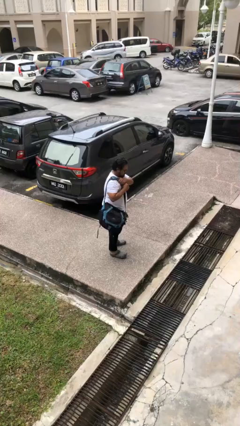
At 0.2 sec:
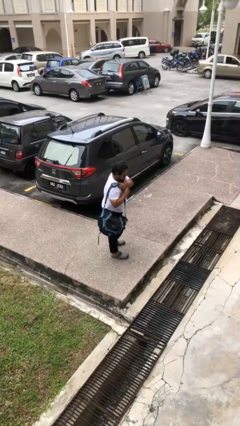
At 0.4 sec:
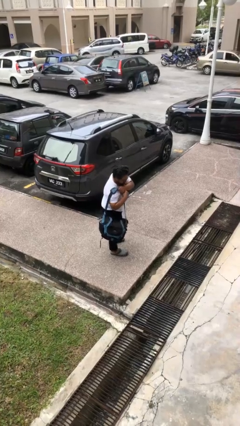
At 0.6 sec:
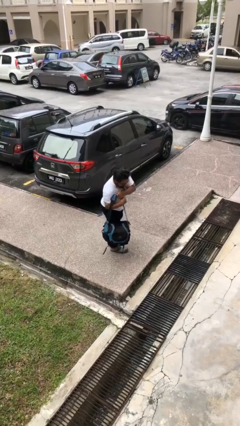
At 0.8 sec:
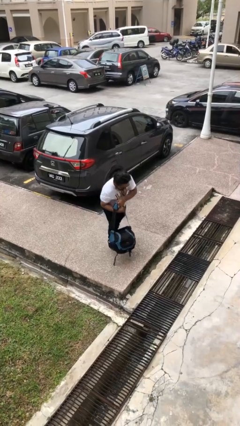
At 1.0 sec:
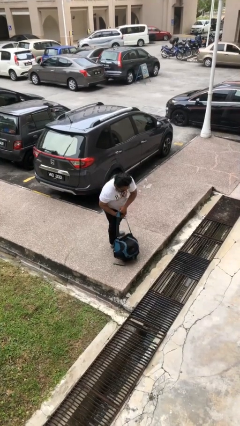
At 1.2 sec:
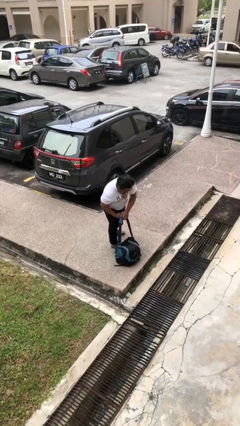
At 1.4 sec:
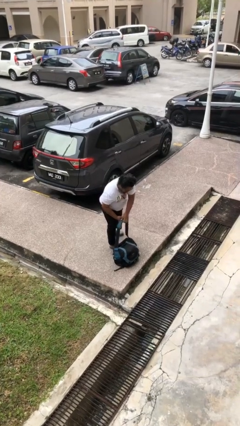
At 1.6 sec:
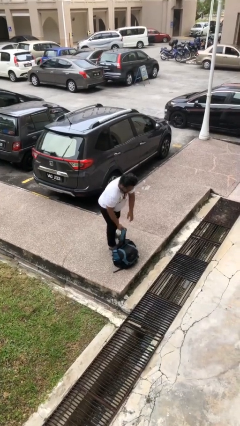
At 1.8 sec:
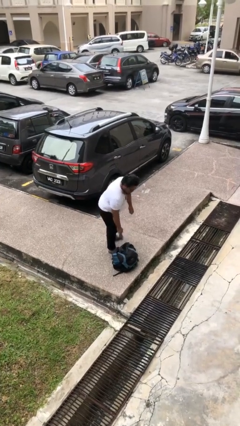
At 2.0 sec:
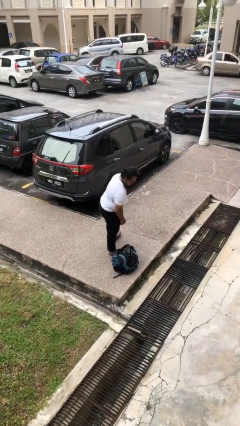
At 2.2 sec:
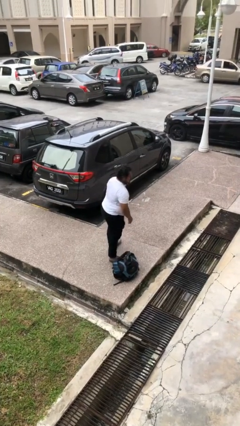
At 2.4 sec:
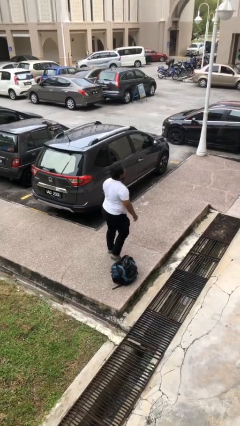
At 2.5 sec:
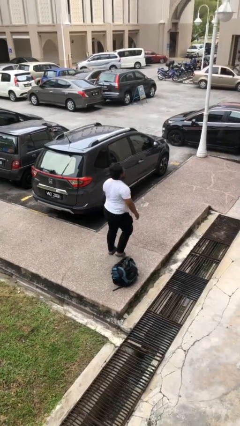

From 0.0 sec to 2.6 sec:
person puts down object on floor

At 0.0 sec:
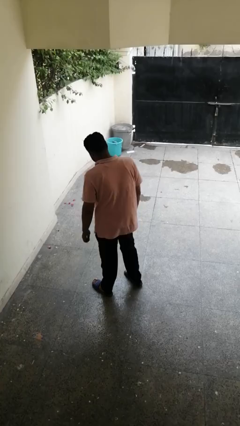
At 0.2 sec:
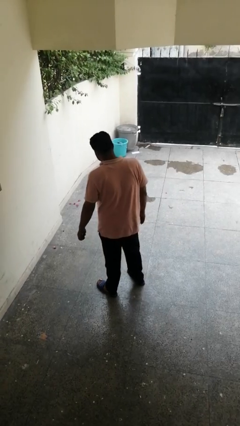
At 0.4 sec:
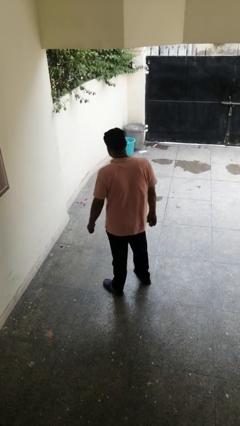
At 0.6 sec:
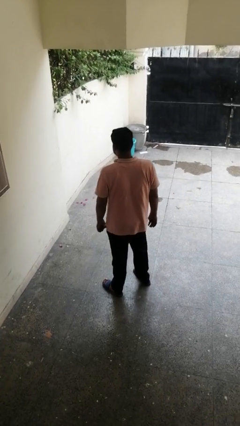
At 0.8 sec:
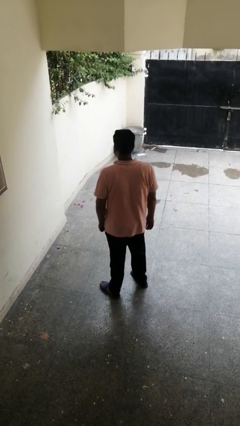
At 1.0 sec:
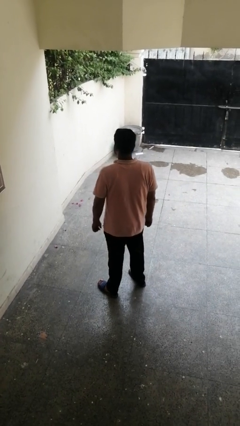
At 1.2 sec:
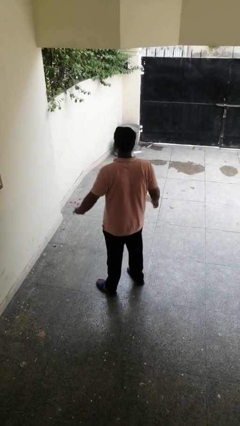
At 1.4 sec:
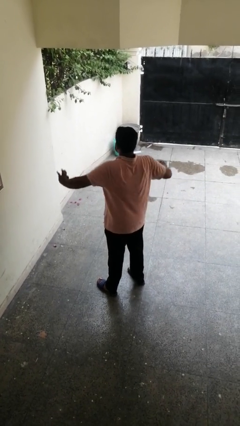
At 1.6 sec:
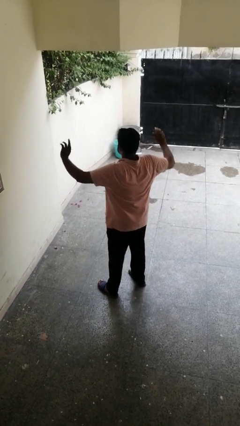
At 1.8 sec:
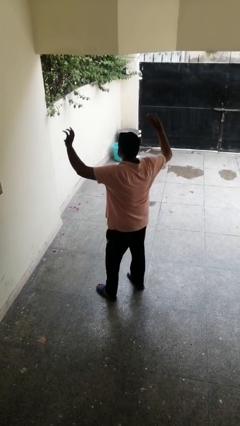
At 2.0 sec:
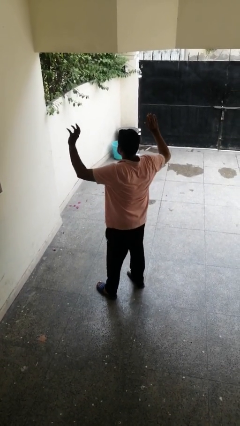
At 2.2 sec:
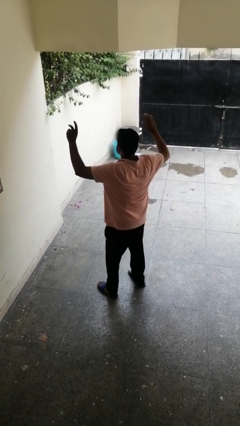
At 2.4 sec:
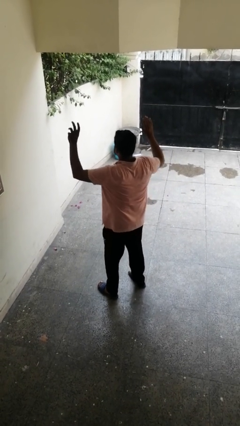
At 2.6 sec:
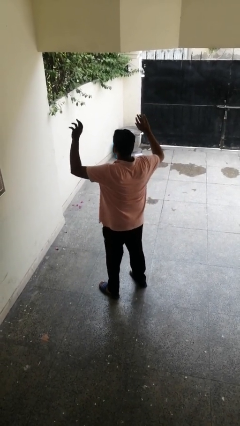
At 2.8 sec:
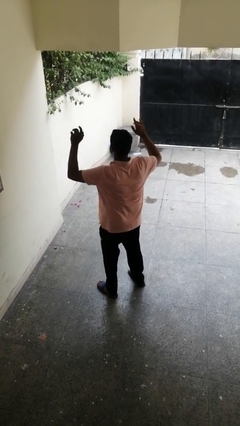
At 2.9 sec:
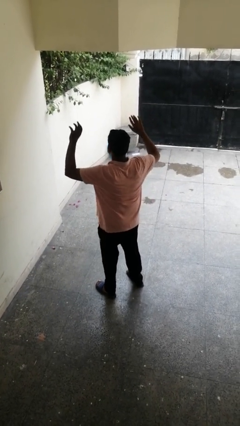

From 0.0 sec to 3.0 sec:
person dances in place

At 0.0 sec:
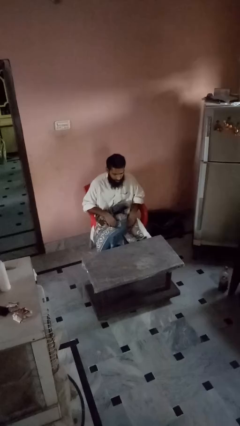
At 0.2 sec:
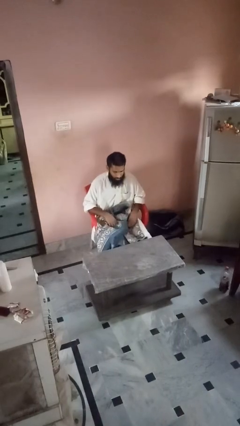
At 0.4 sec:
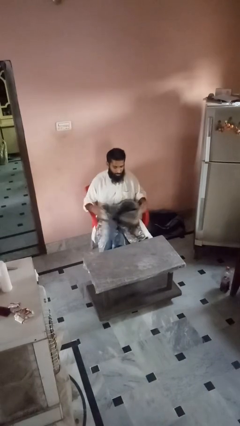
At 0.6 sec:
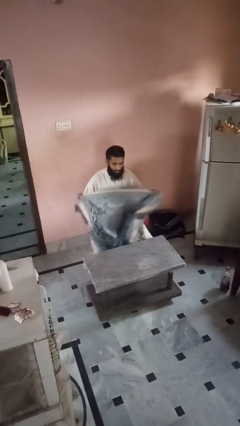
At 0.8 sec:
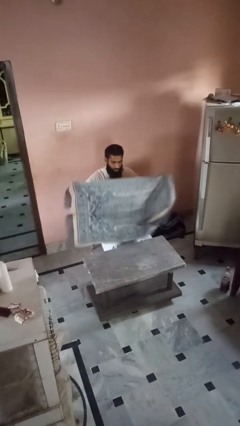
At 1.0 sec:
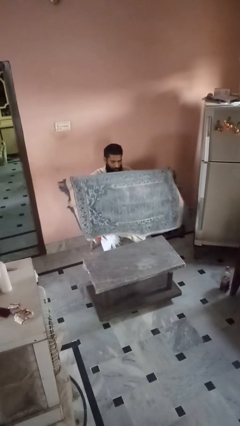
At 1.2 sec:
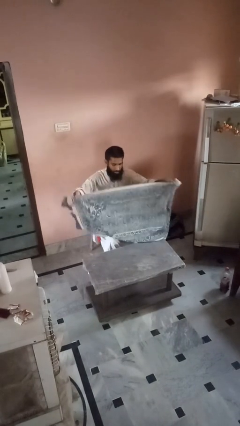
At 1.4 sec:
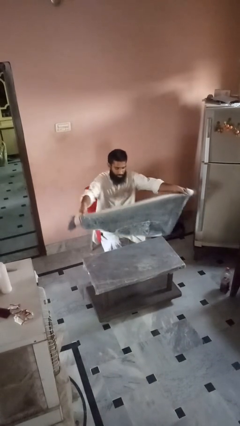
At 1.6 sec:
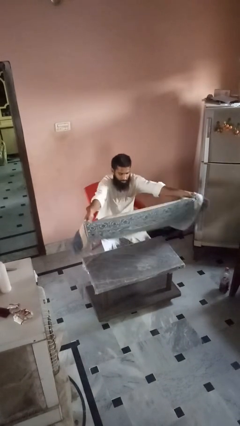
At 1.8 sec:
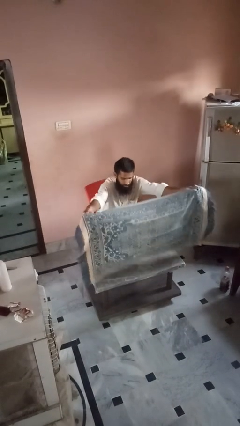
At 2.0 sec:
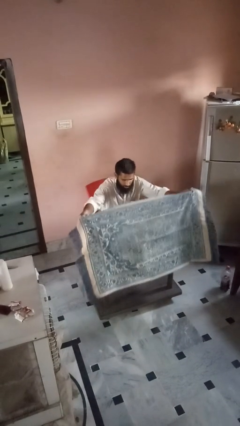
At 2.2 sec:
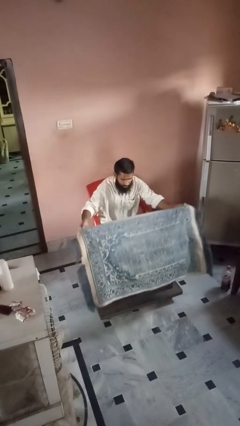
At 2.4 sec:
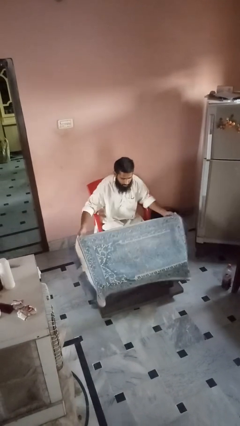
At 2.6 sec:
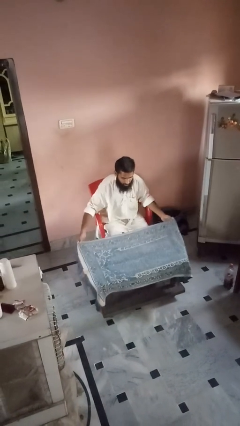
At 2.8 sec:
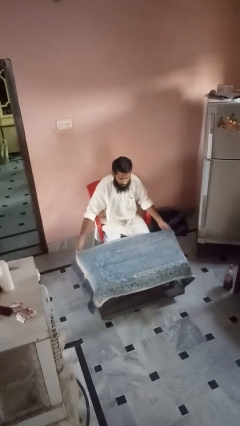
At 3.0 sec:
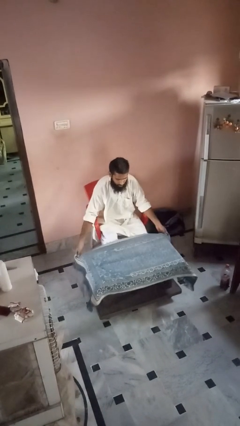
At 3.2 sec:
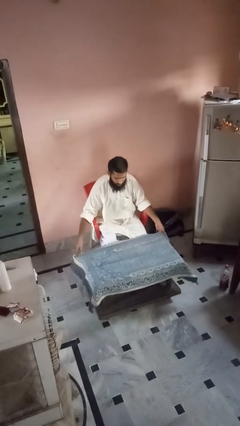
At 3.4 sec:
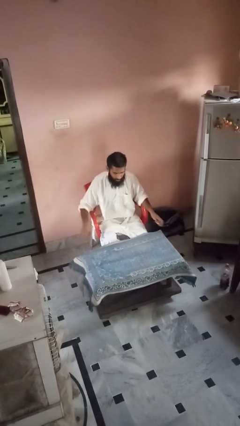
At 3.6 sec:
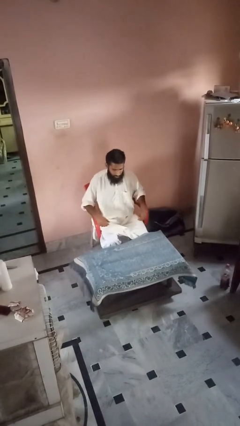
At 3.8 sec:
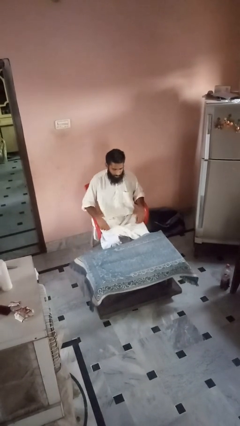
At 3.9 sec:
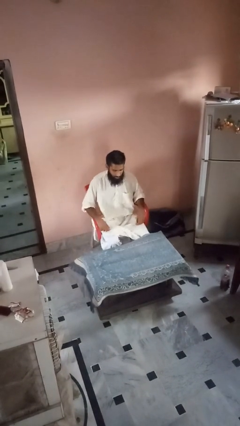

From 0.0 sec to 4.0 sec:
person spreads tablecloth

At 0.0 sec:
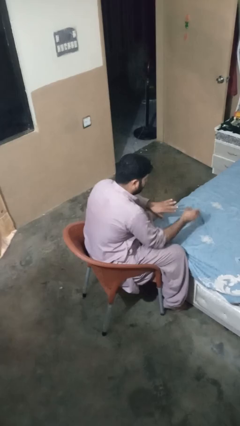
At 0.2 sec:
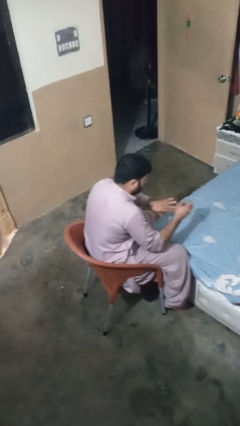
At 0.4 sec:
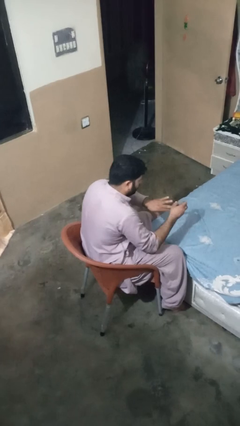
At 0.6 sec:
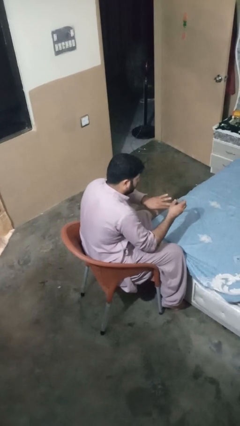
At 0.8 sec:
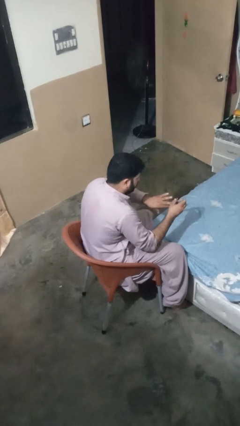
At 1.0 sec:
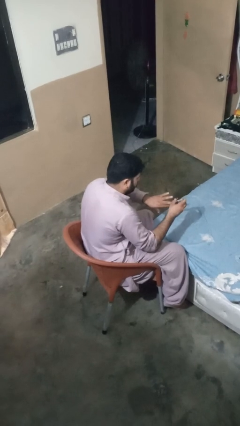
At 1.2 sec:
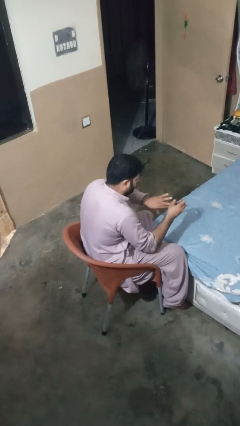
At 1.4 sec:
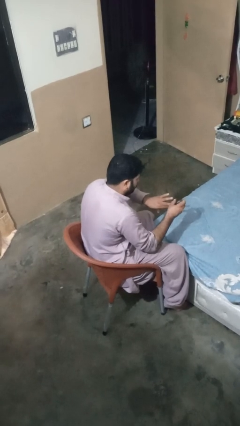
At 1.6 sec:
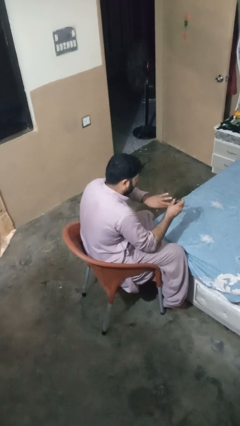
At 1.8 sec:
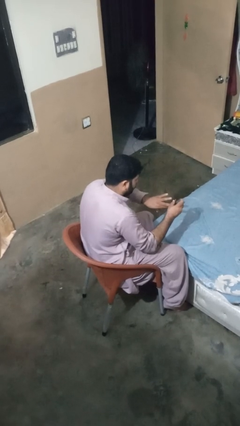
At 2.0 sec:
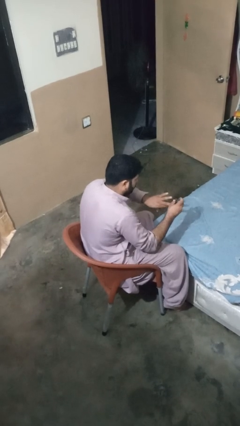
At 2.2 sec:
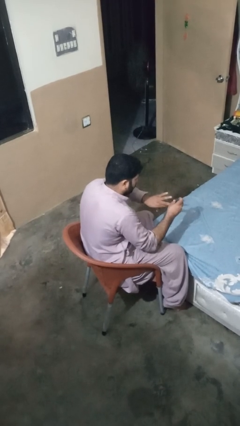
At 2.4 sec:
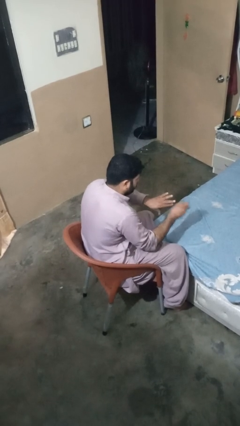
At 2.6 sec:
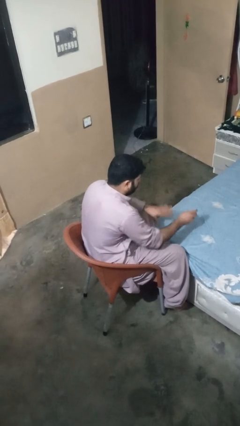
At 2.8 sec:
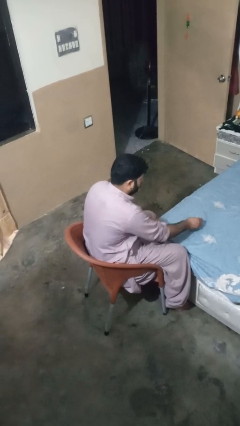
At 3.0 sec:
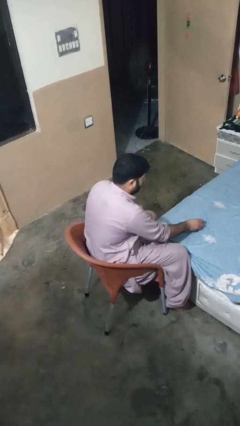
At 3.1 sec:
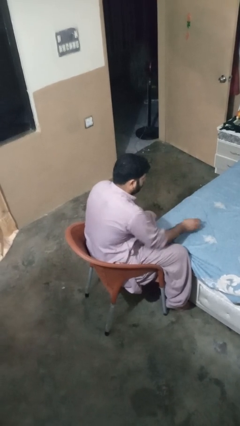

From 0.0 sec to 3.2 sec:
person clips fingernails

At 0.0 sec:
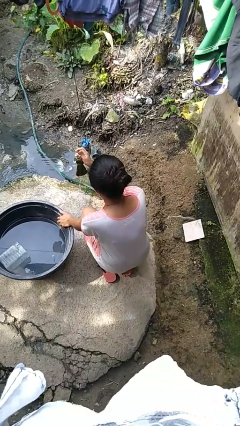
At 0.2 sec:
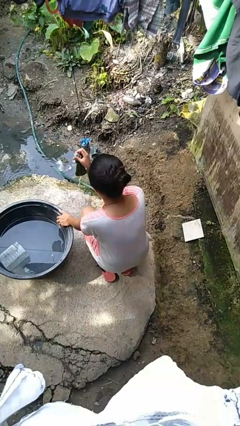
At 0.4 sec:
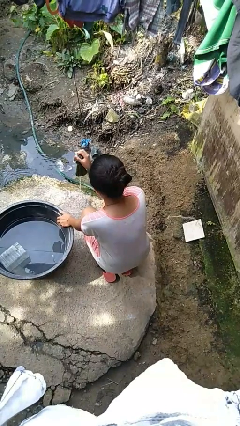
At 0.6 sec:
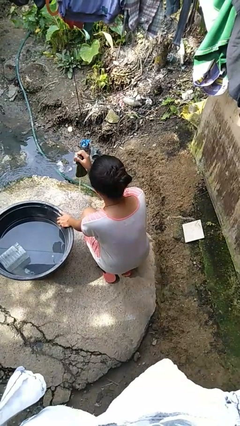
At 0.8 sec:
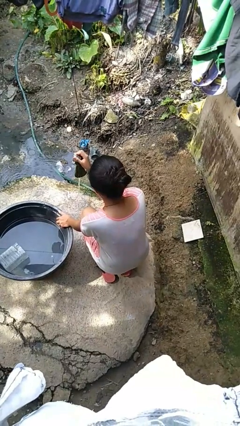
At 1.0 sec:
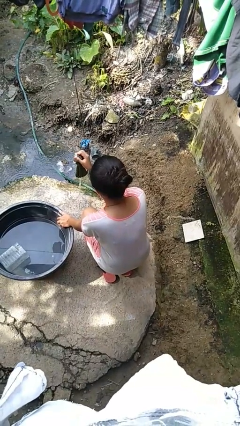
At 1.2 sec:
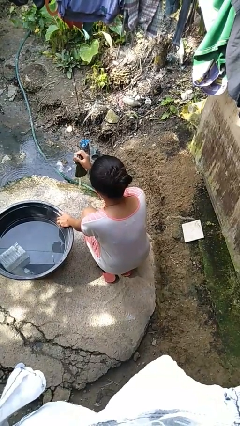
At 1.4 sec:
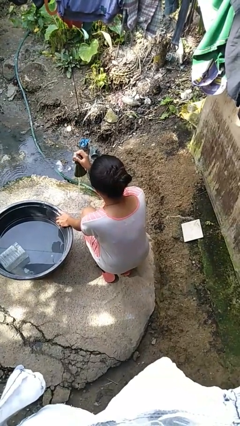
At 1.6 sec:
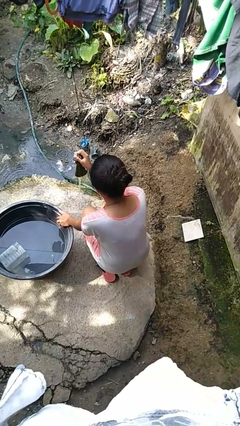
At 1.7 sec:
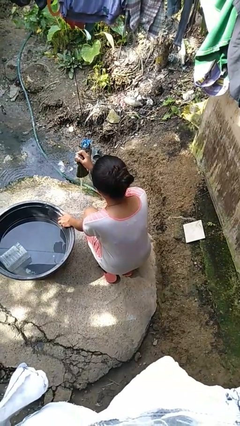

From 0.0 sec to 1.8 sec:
person turns on faucet

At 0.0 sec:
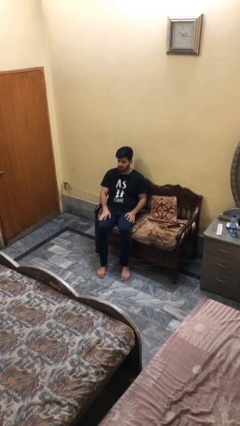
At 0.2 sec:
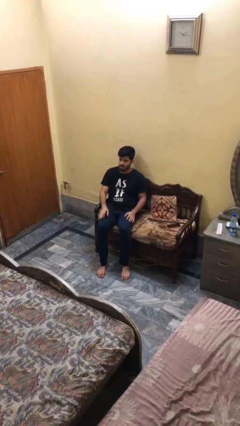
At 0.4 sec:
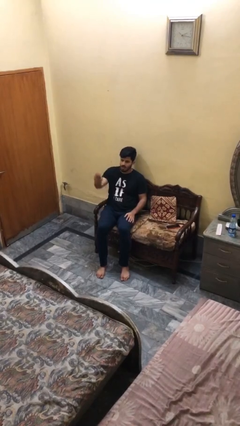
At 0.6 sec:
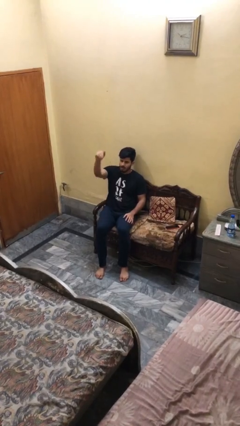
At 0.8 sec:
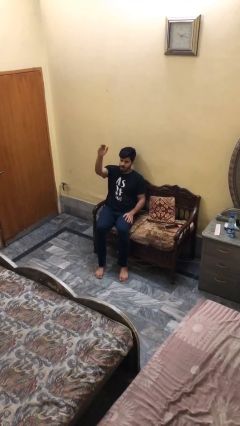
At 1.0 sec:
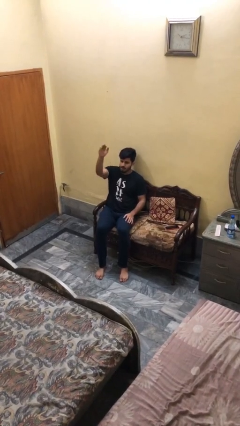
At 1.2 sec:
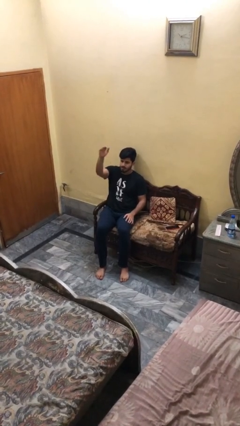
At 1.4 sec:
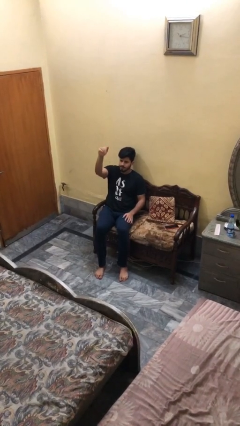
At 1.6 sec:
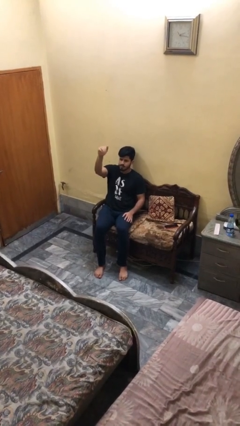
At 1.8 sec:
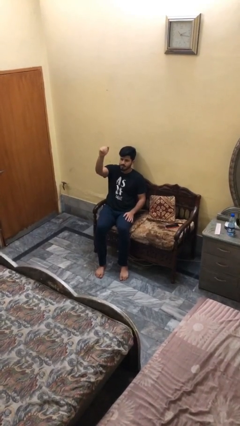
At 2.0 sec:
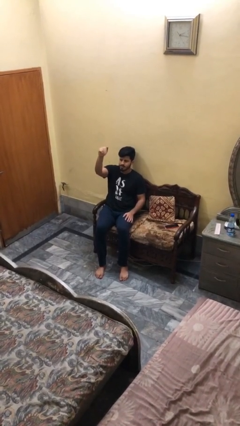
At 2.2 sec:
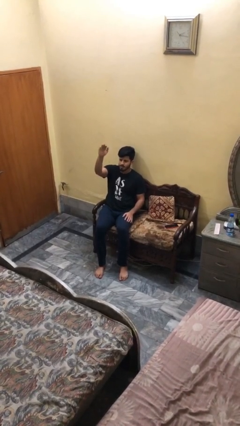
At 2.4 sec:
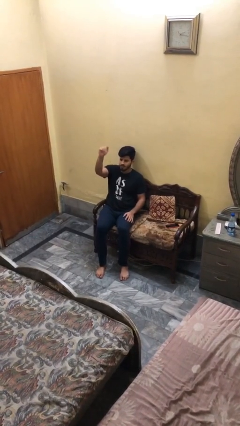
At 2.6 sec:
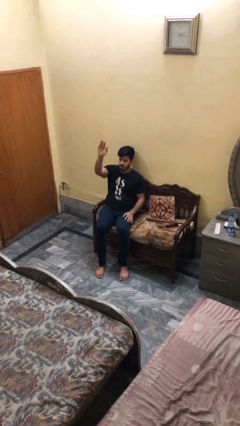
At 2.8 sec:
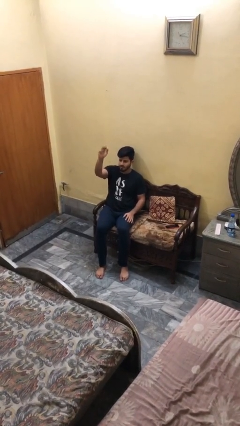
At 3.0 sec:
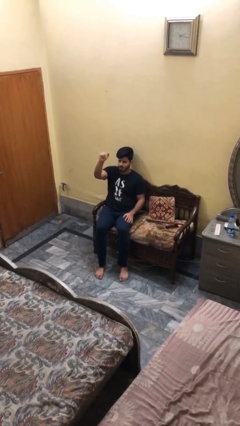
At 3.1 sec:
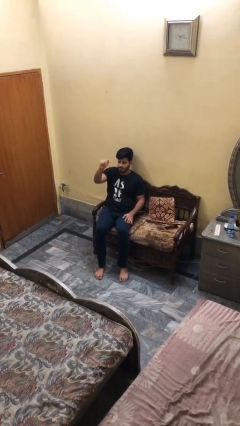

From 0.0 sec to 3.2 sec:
person gestures come here
